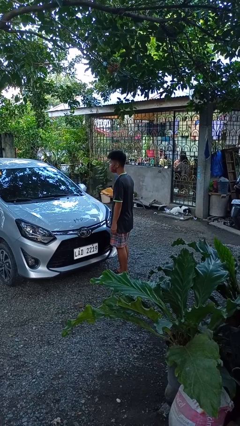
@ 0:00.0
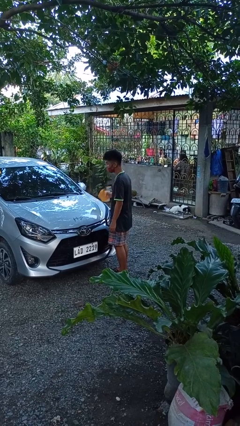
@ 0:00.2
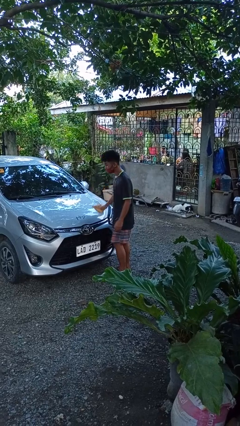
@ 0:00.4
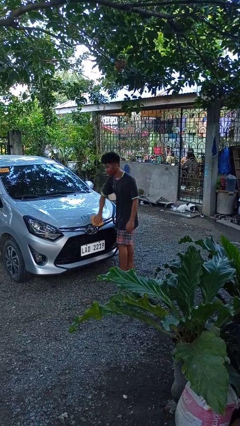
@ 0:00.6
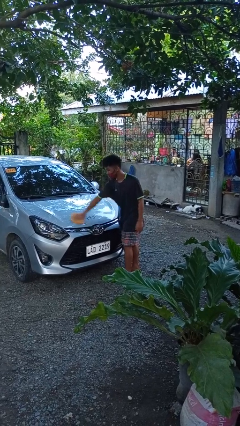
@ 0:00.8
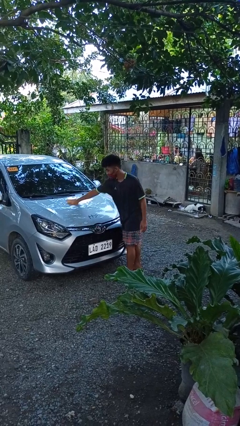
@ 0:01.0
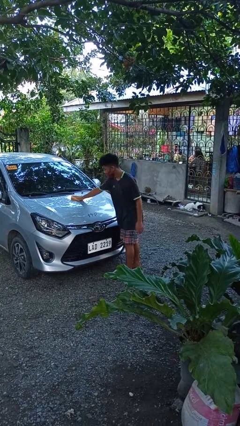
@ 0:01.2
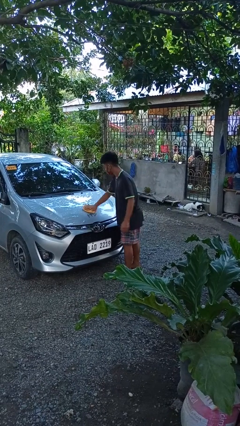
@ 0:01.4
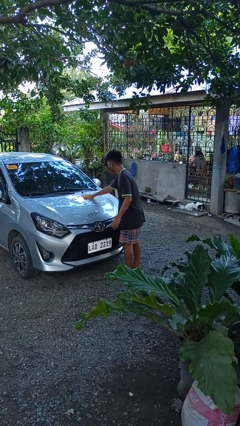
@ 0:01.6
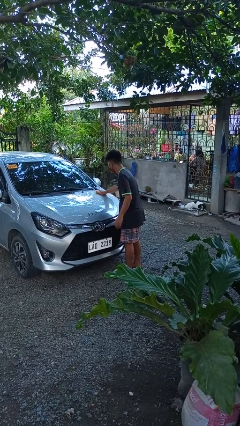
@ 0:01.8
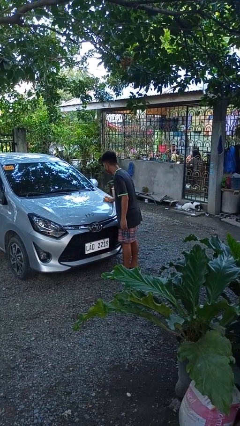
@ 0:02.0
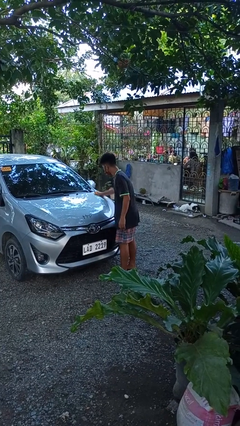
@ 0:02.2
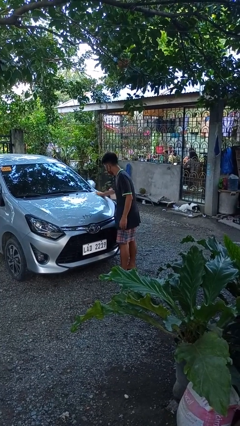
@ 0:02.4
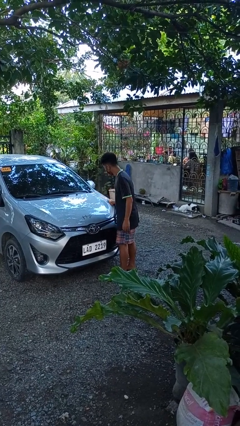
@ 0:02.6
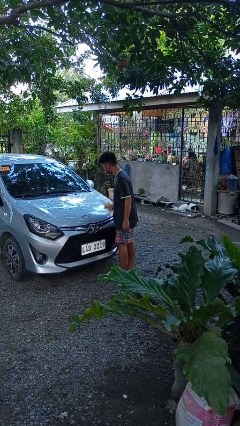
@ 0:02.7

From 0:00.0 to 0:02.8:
person polishes car with rag

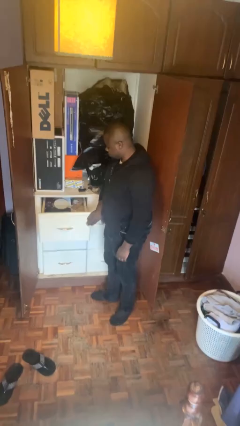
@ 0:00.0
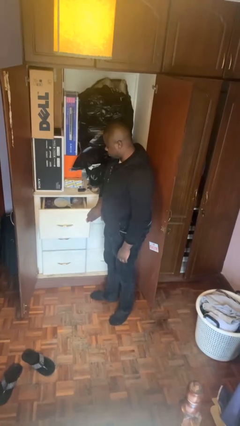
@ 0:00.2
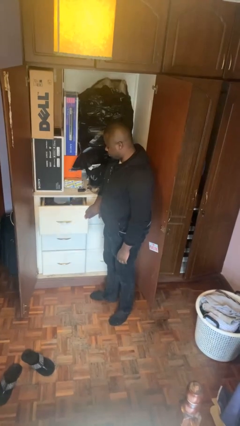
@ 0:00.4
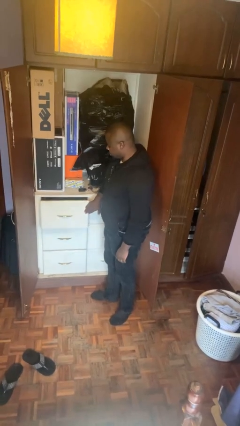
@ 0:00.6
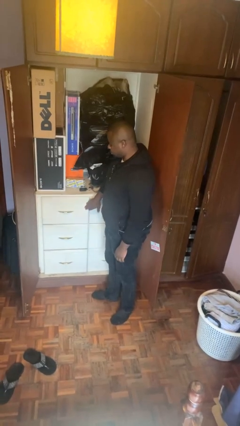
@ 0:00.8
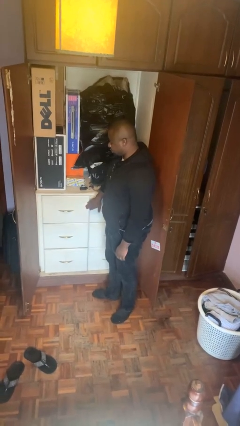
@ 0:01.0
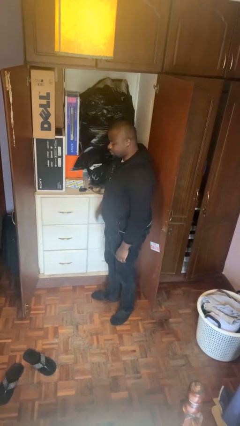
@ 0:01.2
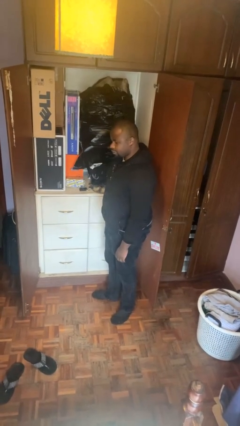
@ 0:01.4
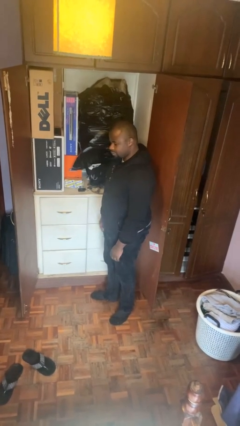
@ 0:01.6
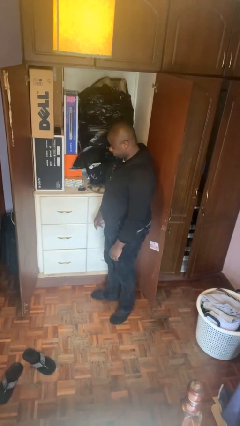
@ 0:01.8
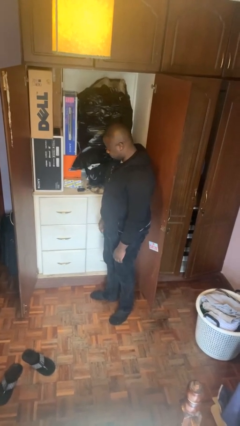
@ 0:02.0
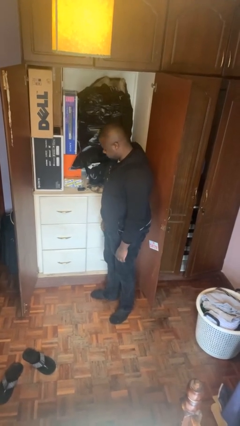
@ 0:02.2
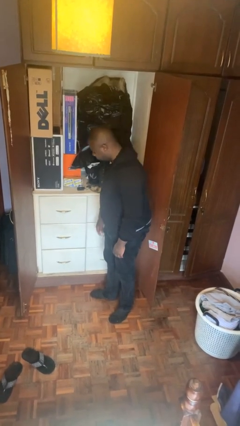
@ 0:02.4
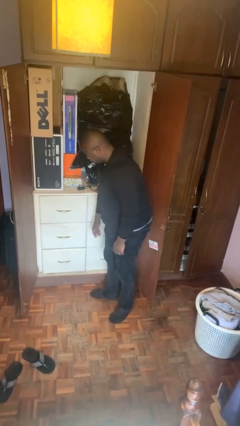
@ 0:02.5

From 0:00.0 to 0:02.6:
person closes dresser drawer

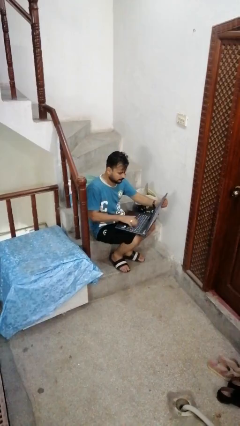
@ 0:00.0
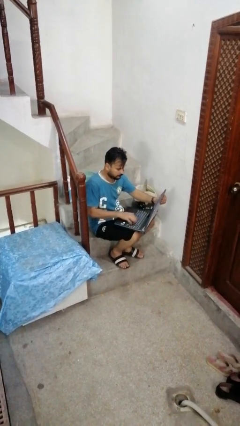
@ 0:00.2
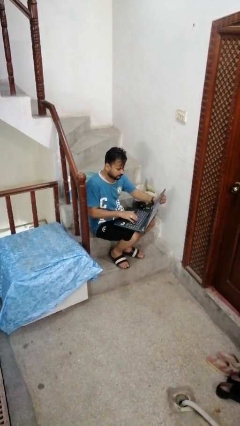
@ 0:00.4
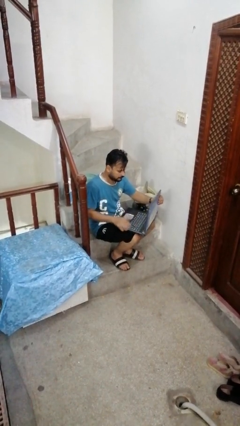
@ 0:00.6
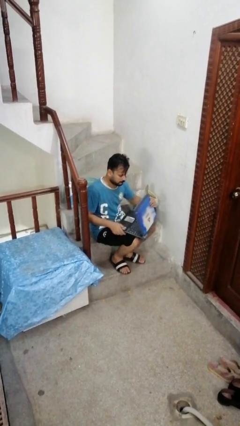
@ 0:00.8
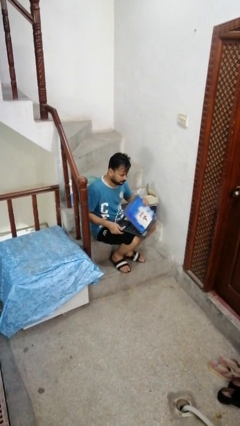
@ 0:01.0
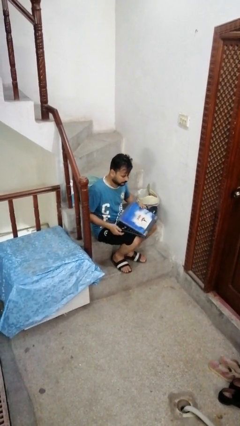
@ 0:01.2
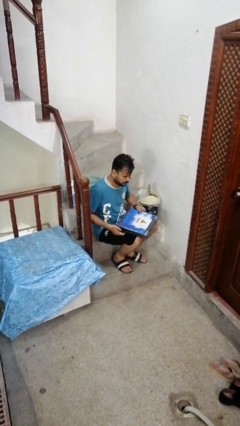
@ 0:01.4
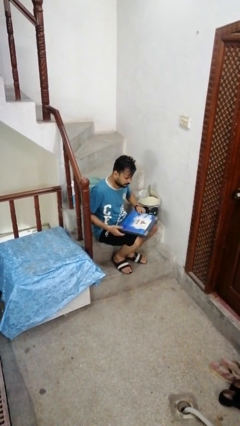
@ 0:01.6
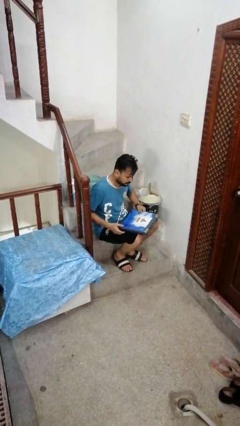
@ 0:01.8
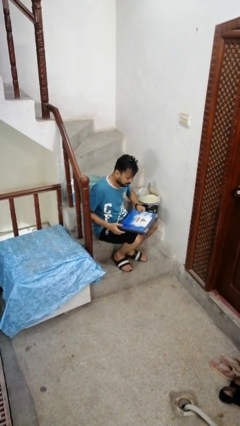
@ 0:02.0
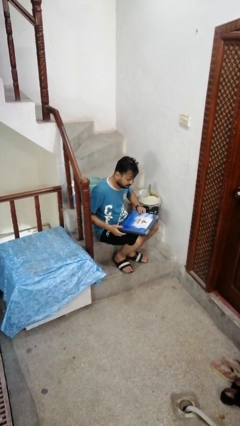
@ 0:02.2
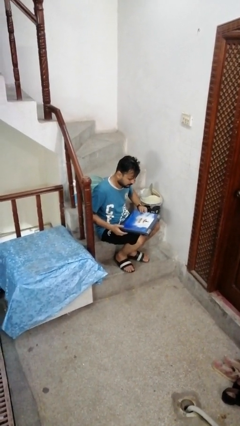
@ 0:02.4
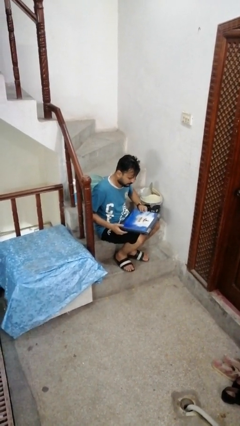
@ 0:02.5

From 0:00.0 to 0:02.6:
person closes laptop

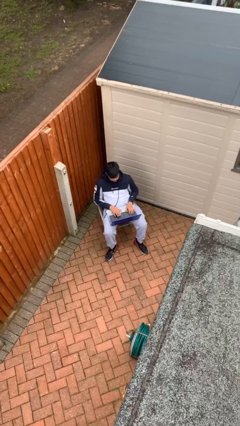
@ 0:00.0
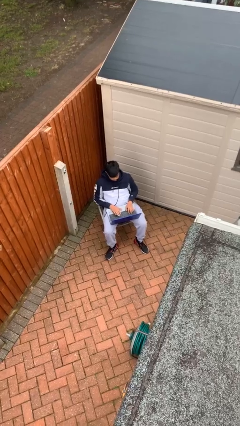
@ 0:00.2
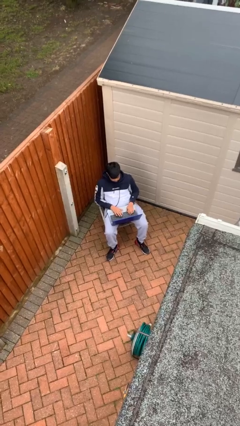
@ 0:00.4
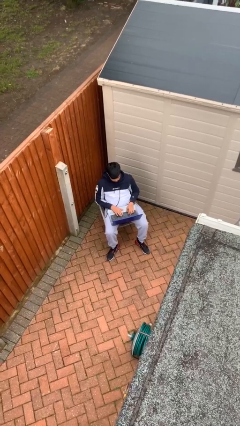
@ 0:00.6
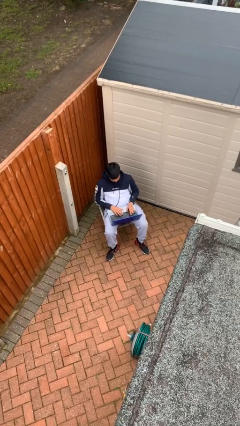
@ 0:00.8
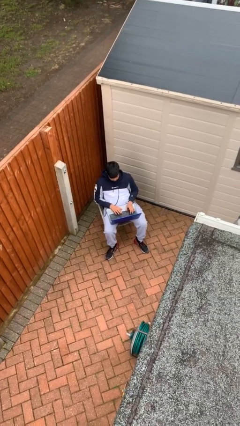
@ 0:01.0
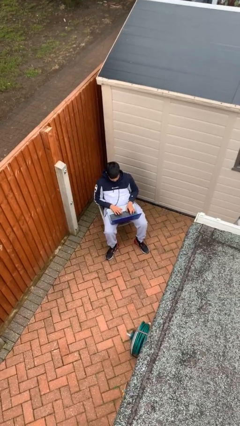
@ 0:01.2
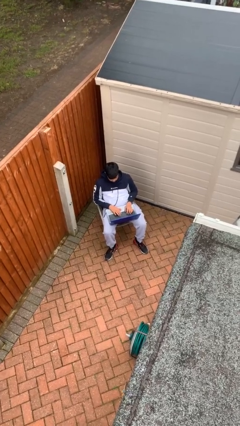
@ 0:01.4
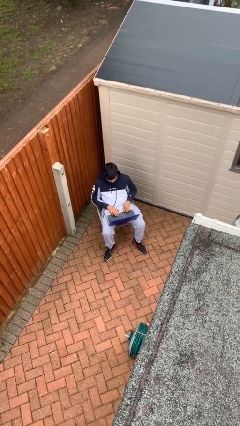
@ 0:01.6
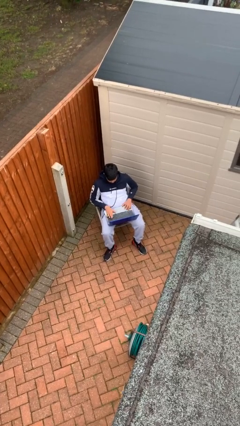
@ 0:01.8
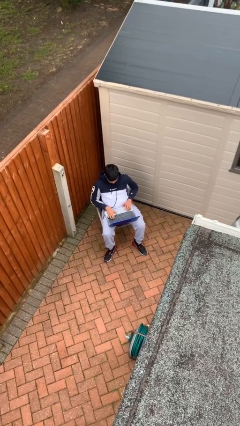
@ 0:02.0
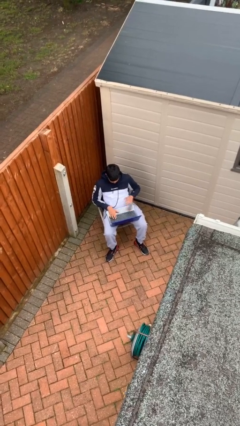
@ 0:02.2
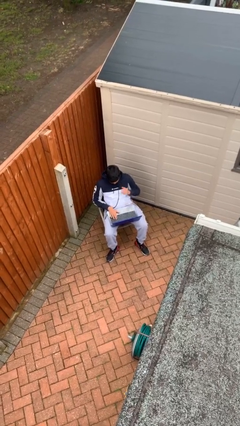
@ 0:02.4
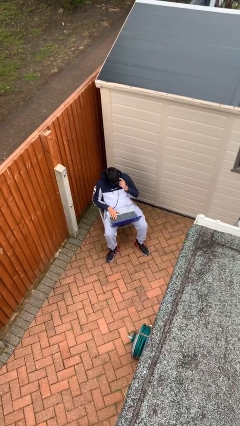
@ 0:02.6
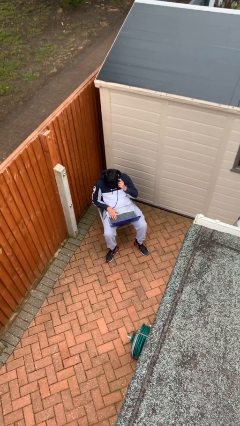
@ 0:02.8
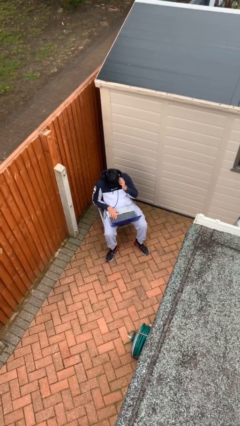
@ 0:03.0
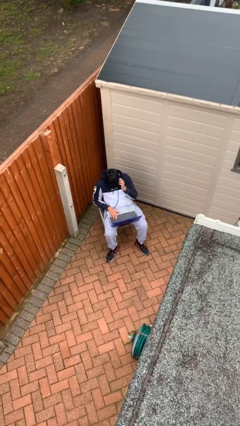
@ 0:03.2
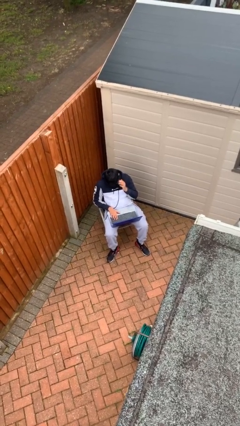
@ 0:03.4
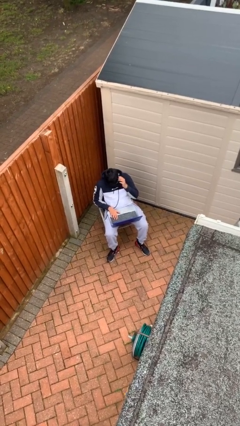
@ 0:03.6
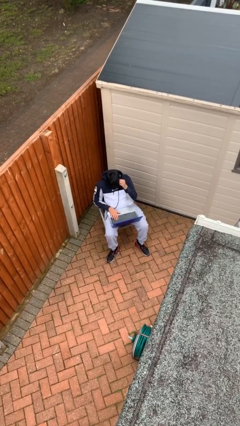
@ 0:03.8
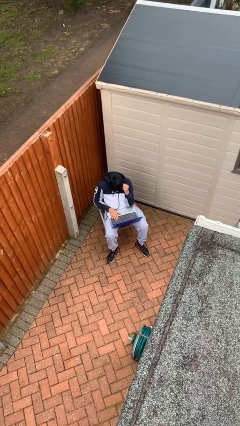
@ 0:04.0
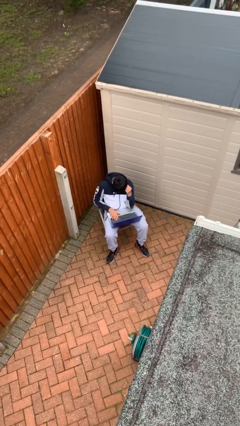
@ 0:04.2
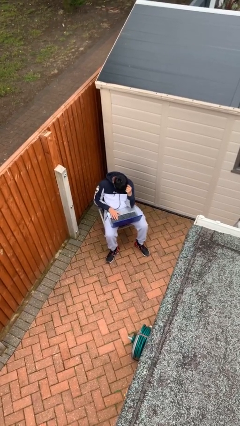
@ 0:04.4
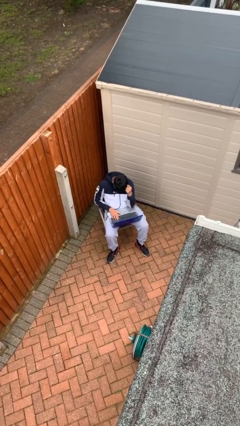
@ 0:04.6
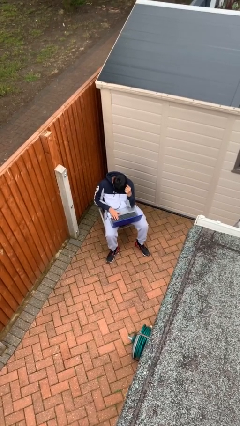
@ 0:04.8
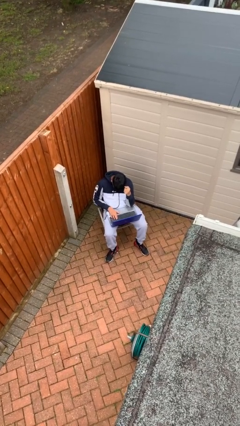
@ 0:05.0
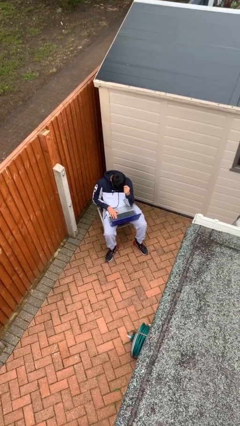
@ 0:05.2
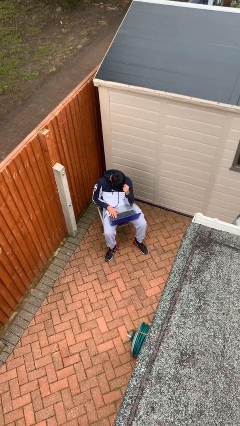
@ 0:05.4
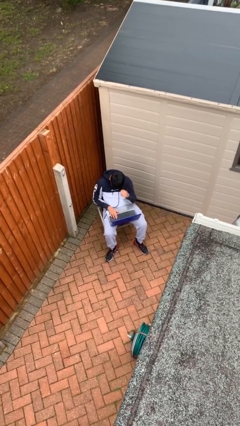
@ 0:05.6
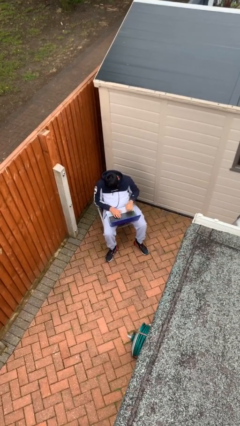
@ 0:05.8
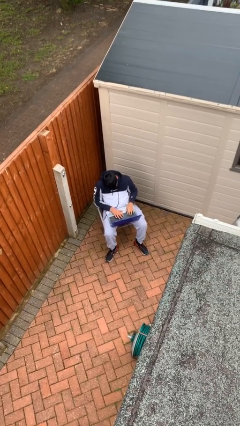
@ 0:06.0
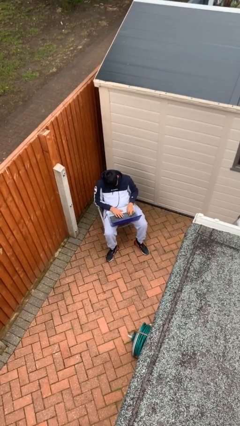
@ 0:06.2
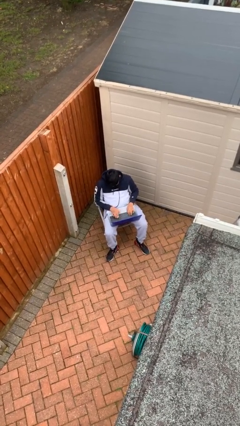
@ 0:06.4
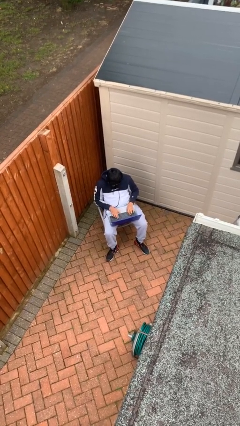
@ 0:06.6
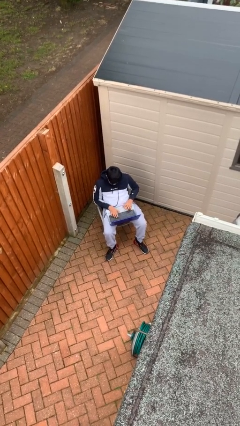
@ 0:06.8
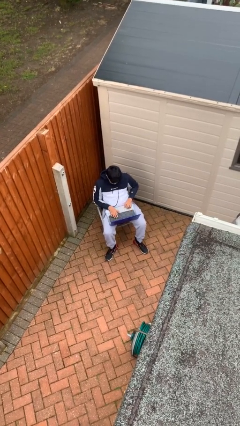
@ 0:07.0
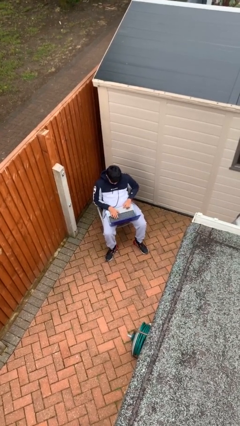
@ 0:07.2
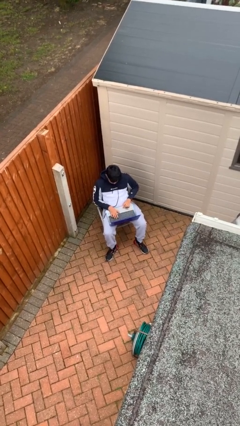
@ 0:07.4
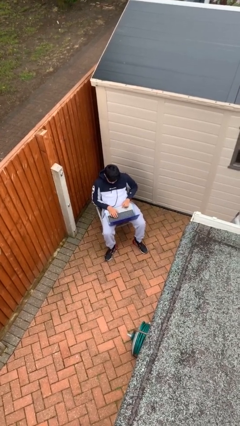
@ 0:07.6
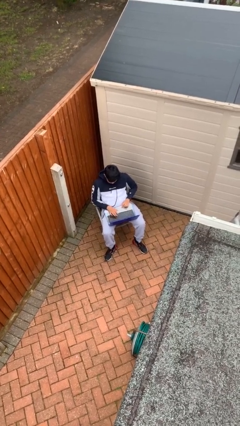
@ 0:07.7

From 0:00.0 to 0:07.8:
person interacts with laptop

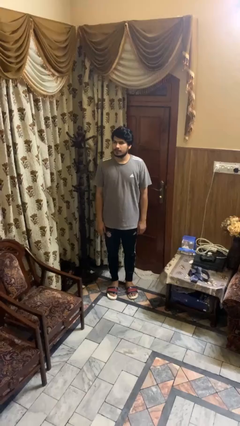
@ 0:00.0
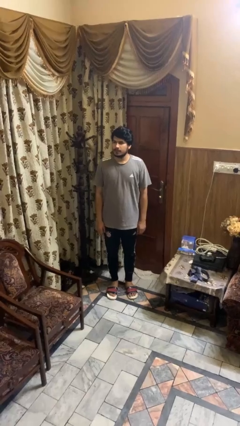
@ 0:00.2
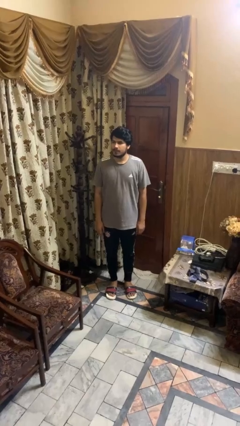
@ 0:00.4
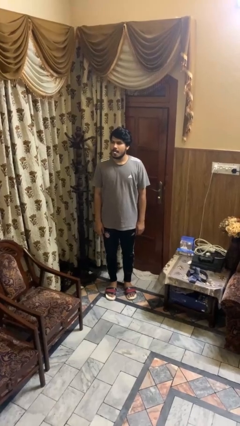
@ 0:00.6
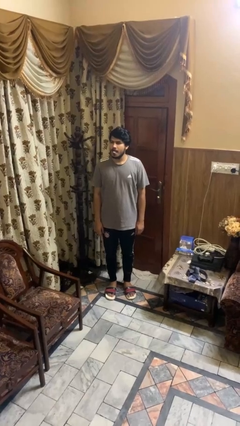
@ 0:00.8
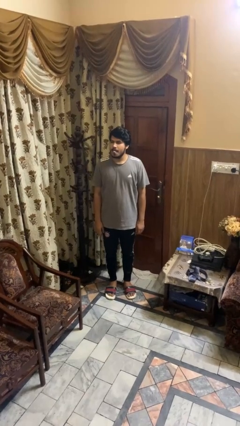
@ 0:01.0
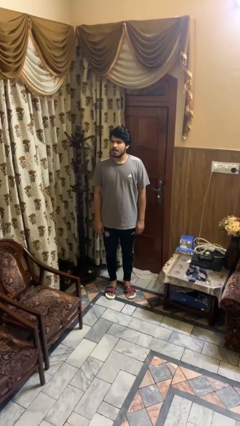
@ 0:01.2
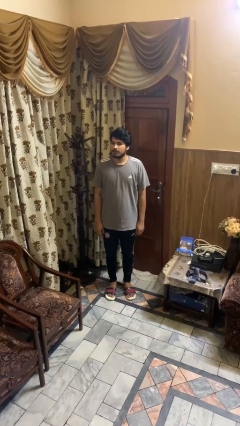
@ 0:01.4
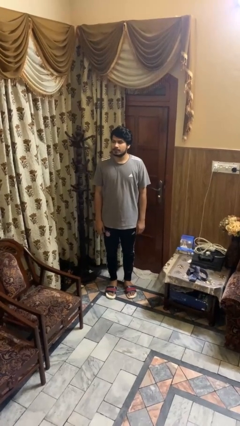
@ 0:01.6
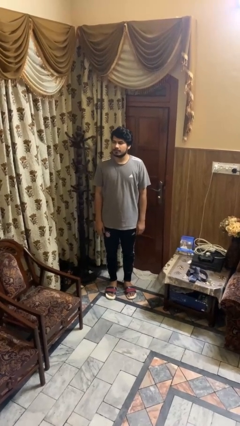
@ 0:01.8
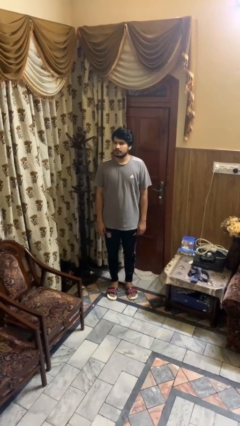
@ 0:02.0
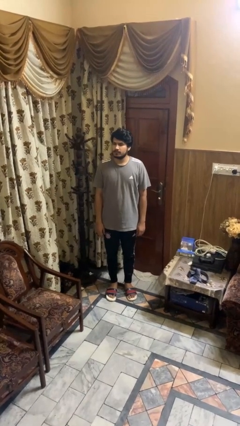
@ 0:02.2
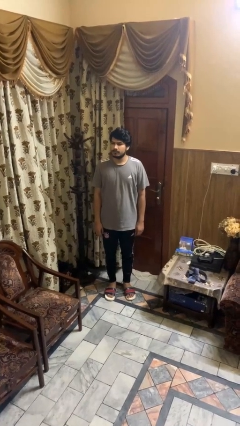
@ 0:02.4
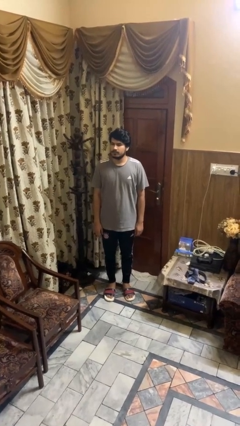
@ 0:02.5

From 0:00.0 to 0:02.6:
person sticks out tongue
